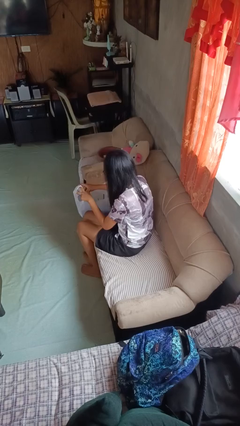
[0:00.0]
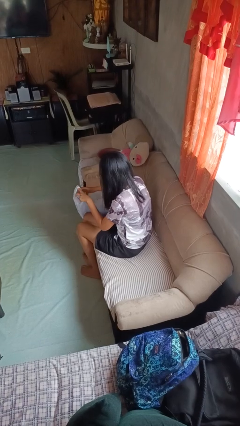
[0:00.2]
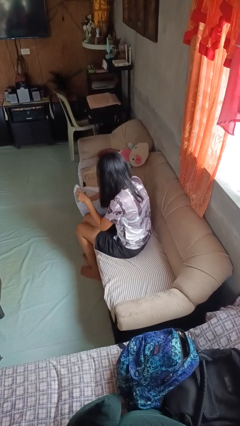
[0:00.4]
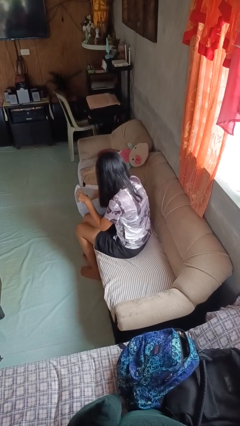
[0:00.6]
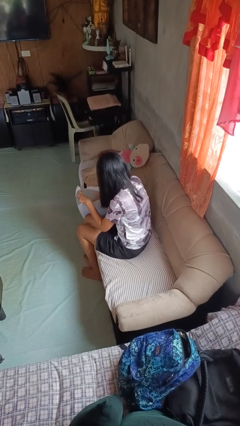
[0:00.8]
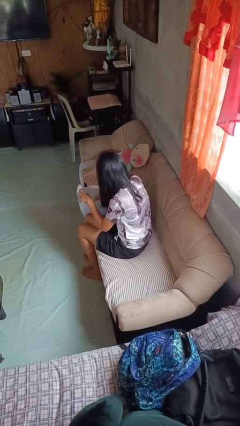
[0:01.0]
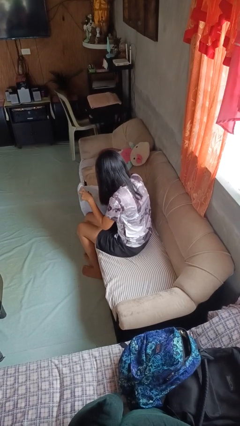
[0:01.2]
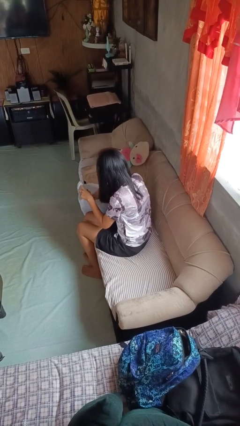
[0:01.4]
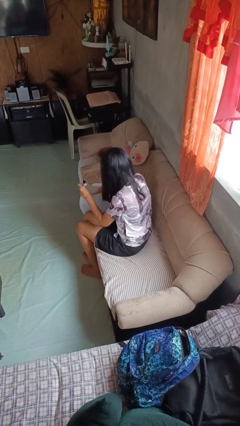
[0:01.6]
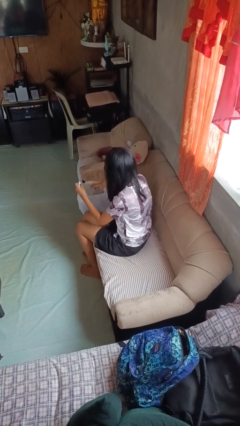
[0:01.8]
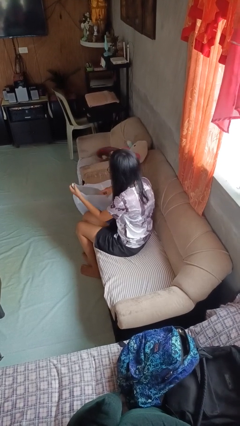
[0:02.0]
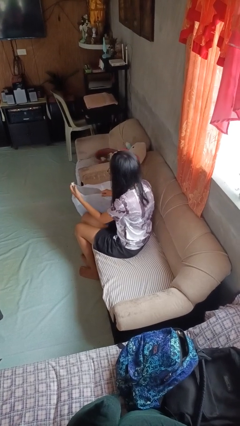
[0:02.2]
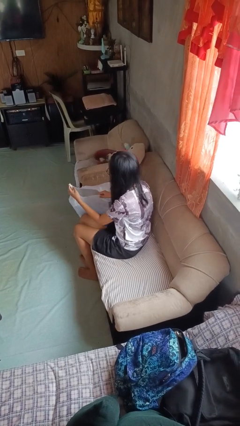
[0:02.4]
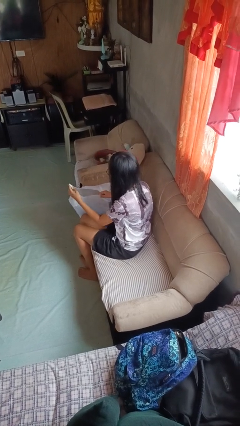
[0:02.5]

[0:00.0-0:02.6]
person searches in bag

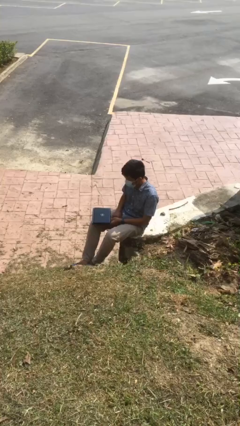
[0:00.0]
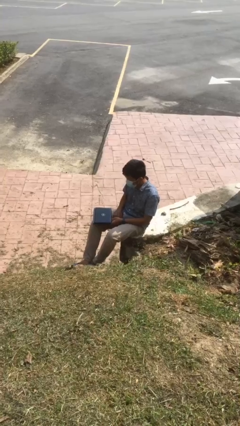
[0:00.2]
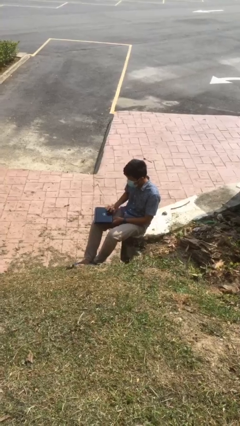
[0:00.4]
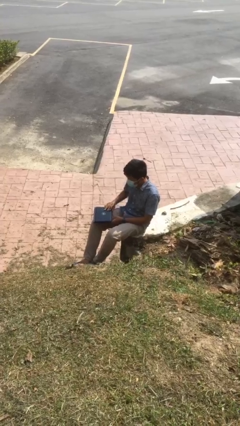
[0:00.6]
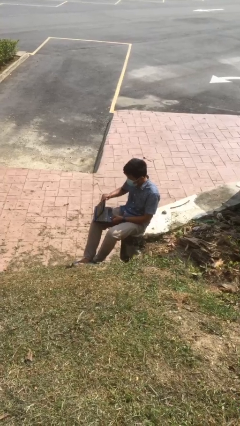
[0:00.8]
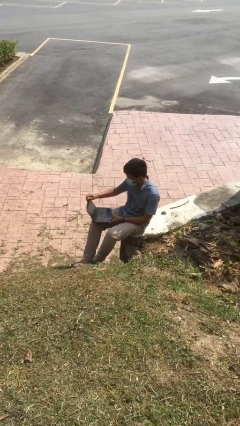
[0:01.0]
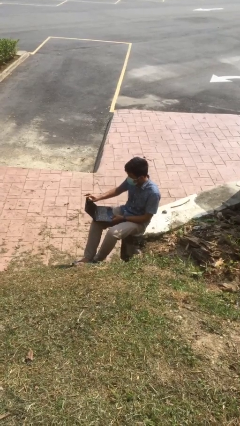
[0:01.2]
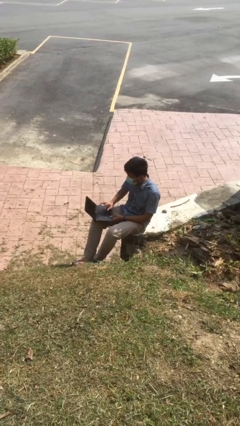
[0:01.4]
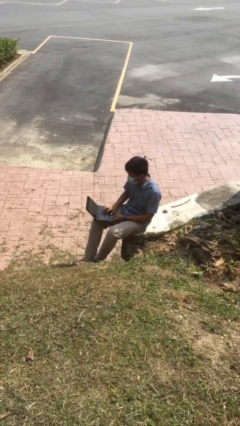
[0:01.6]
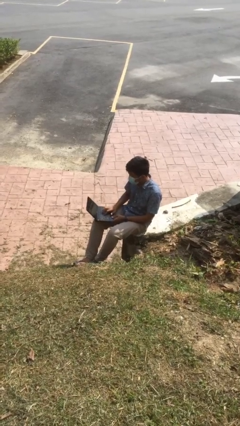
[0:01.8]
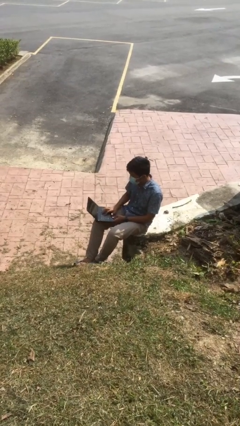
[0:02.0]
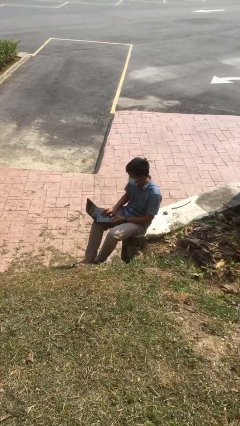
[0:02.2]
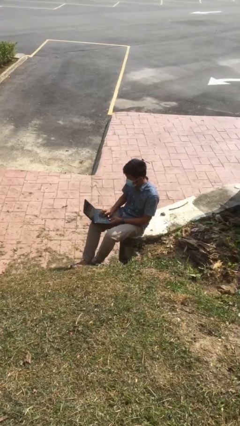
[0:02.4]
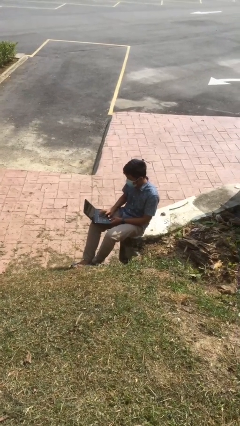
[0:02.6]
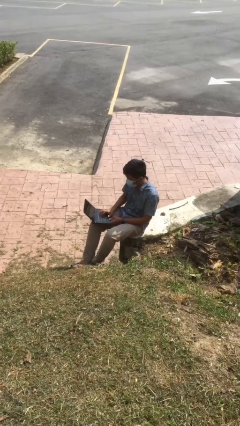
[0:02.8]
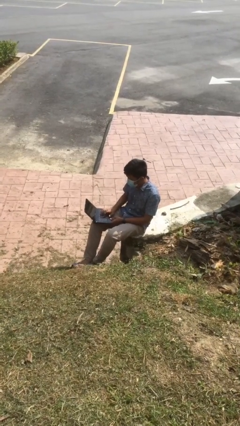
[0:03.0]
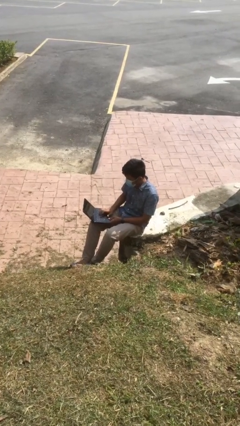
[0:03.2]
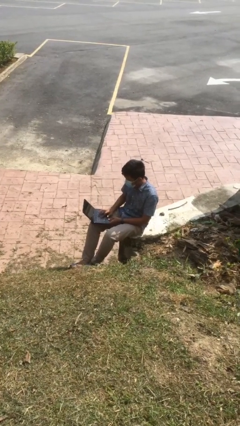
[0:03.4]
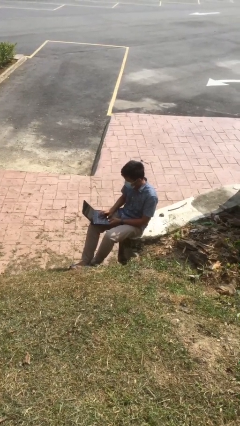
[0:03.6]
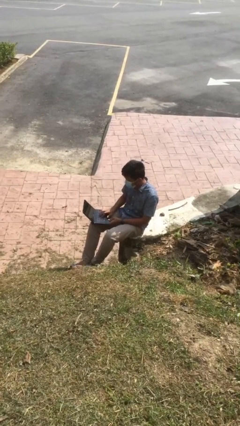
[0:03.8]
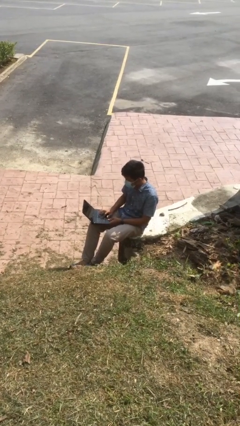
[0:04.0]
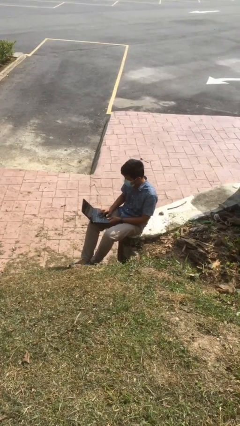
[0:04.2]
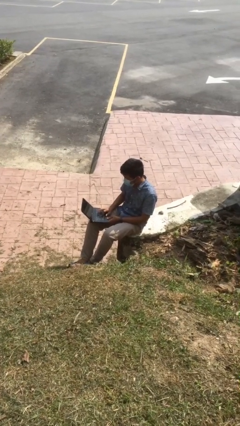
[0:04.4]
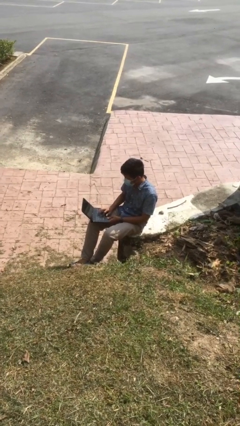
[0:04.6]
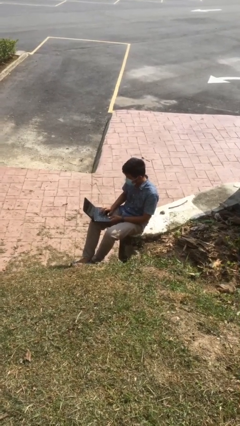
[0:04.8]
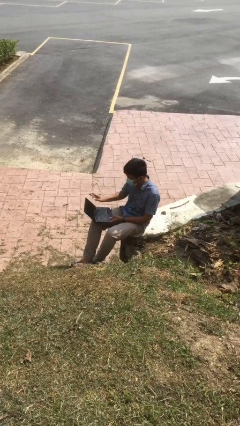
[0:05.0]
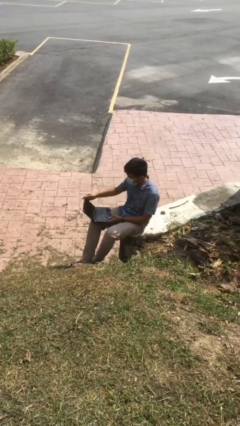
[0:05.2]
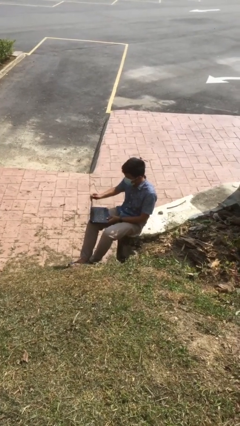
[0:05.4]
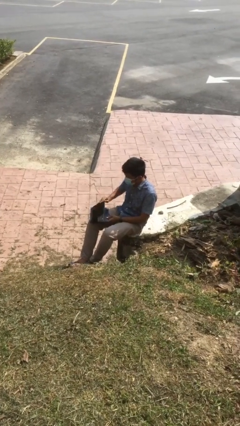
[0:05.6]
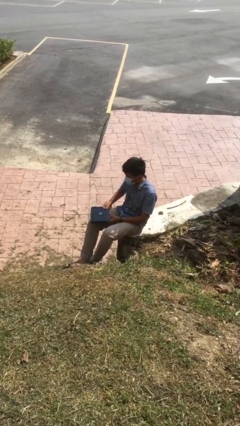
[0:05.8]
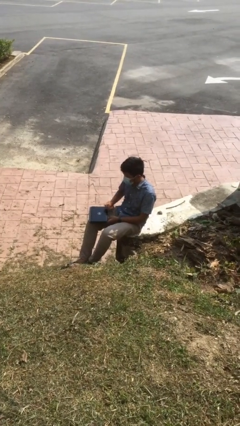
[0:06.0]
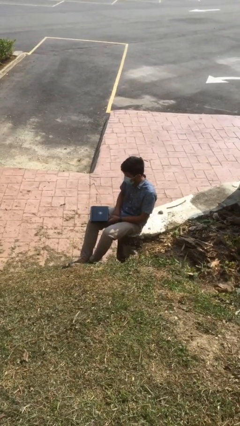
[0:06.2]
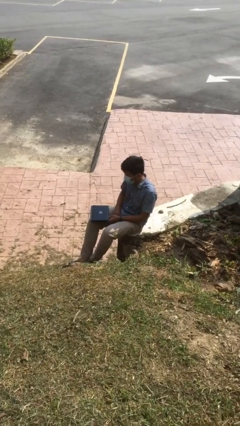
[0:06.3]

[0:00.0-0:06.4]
person interacts with laptop

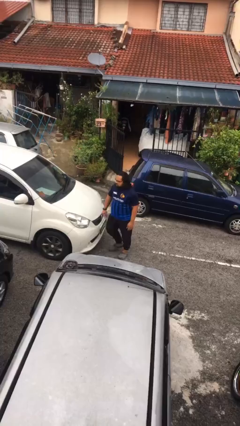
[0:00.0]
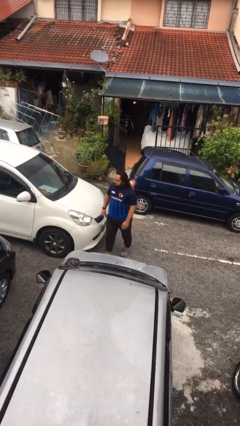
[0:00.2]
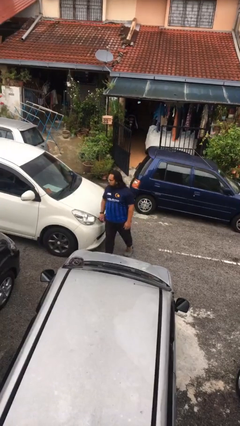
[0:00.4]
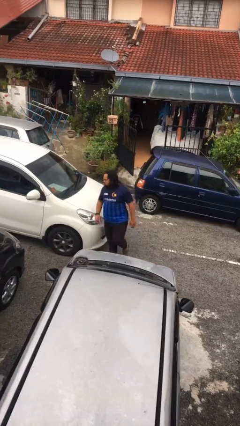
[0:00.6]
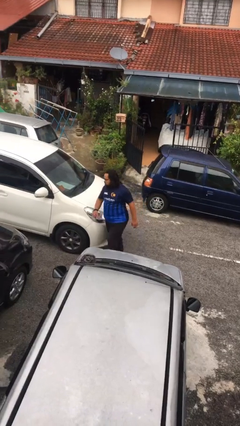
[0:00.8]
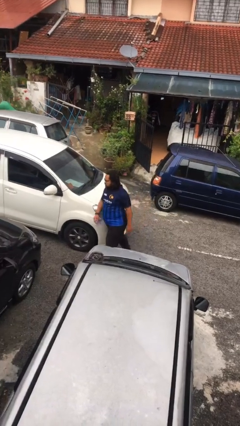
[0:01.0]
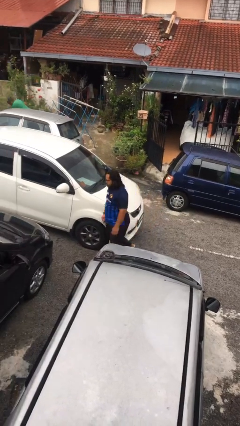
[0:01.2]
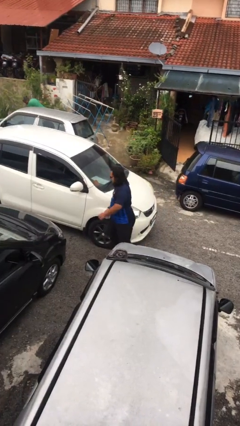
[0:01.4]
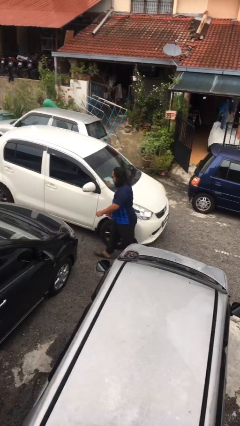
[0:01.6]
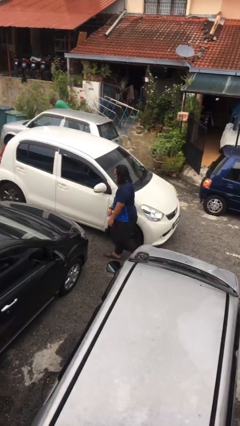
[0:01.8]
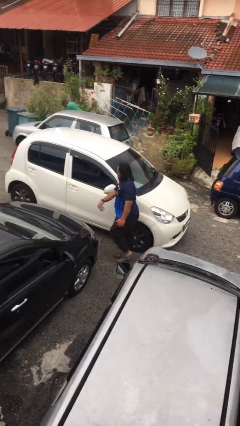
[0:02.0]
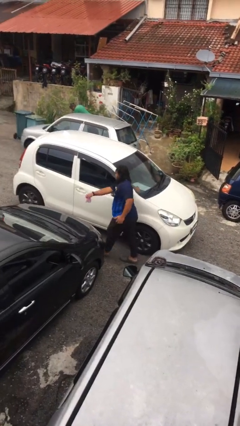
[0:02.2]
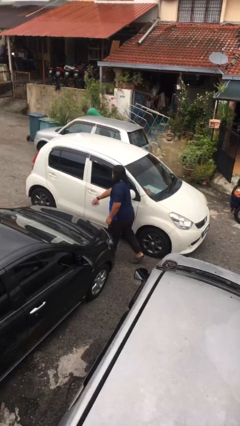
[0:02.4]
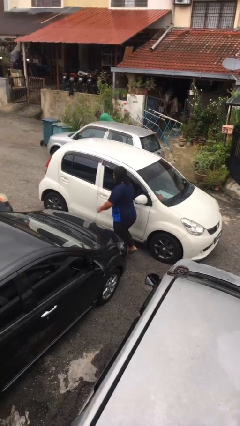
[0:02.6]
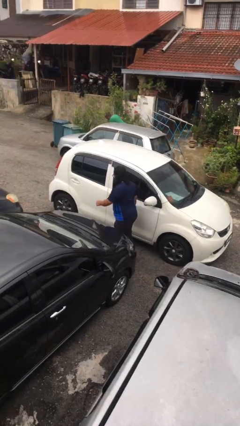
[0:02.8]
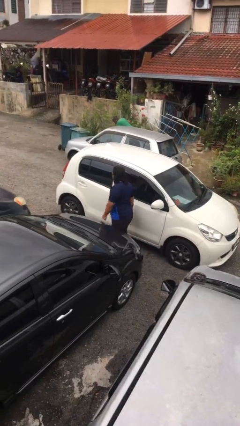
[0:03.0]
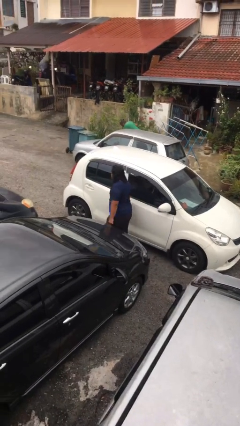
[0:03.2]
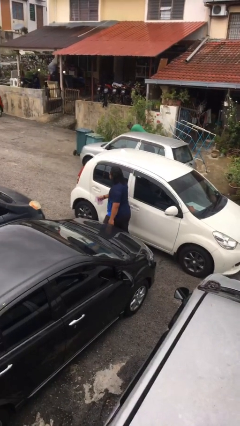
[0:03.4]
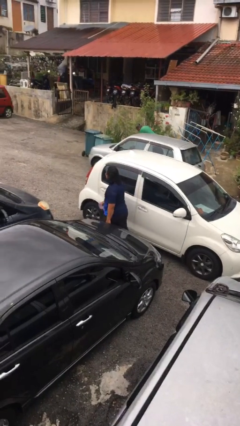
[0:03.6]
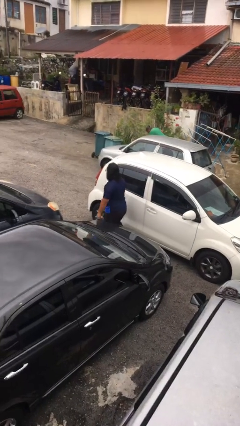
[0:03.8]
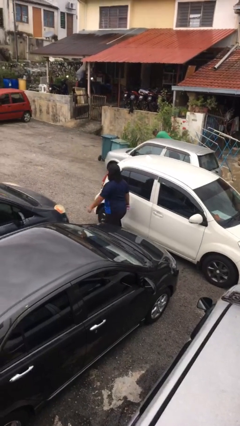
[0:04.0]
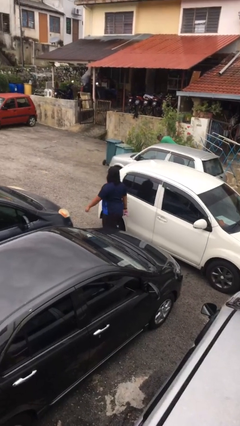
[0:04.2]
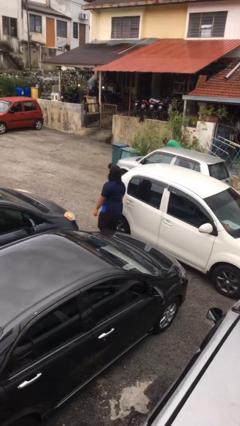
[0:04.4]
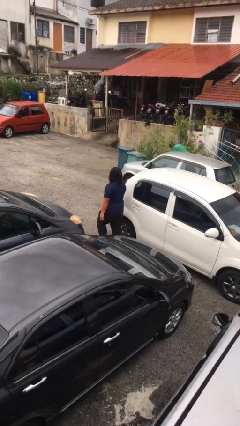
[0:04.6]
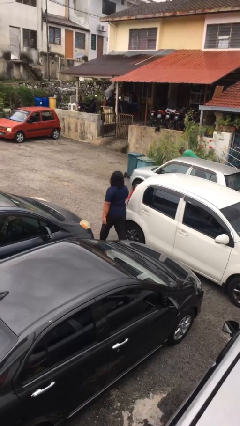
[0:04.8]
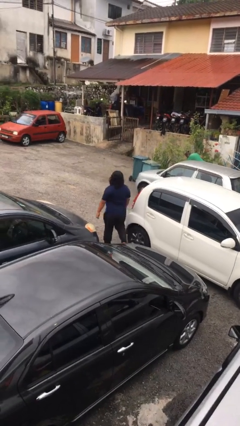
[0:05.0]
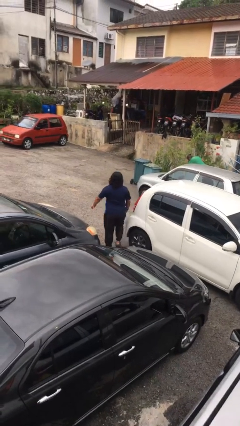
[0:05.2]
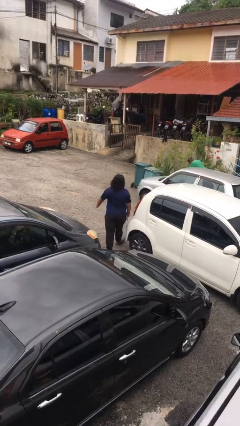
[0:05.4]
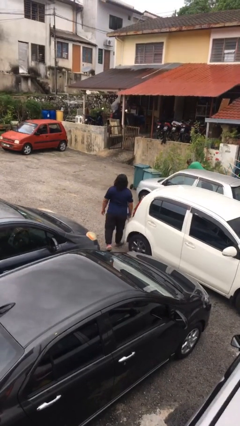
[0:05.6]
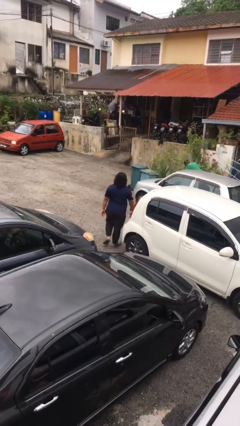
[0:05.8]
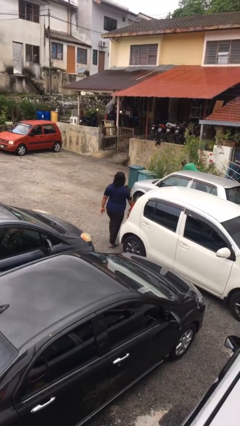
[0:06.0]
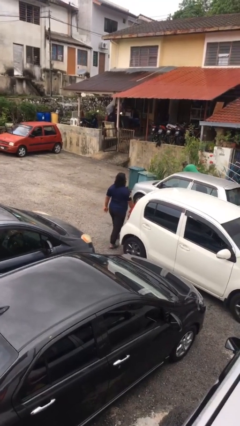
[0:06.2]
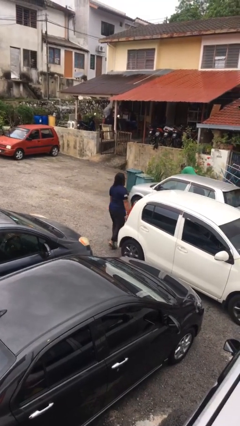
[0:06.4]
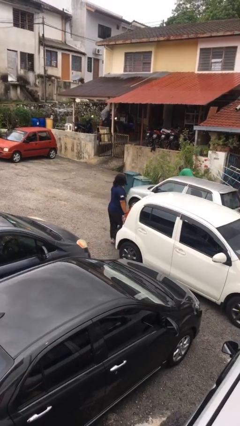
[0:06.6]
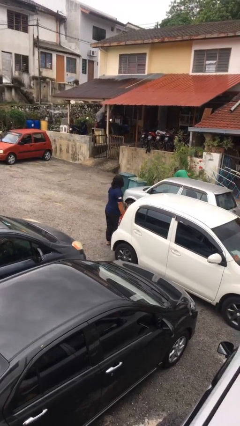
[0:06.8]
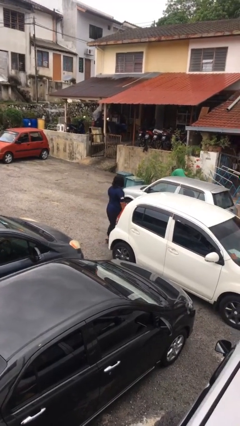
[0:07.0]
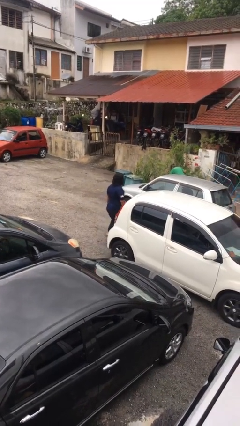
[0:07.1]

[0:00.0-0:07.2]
person walks around car

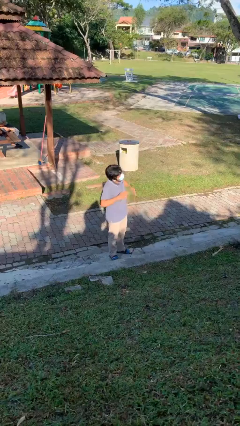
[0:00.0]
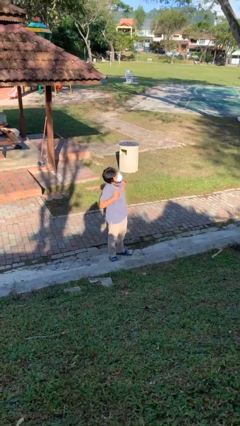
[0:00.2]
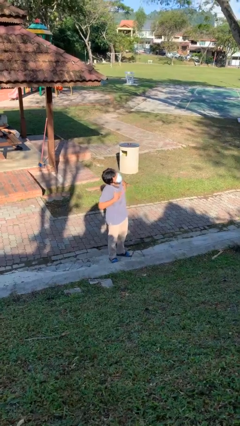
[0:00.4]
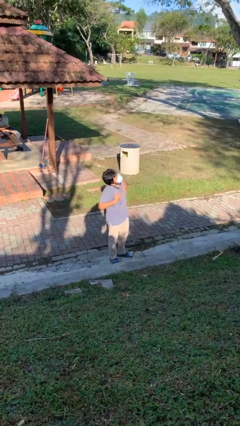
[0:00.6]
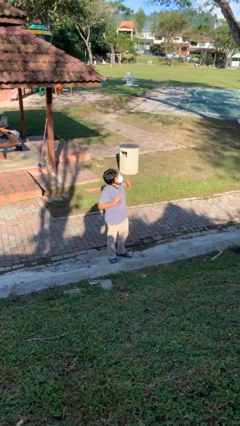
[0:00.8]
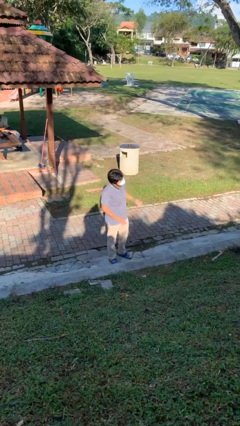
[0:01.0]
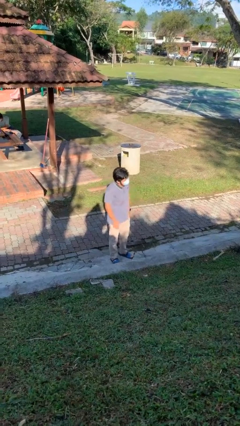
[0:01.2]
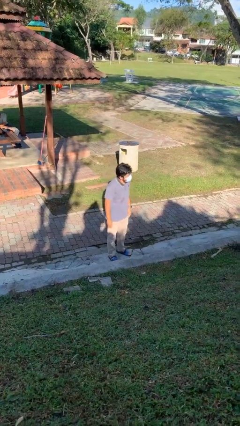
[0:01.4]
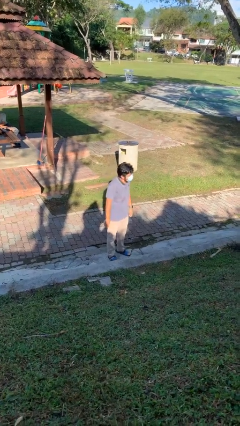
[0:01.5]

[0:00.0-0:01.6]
person drums on chest

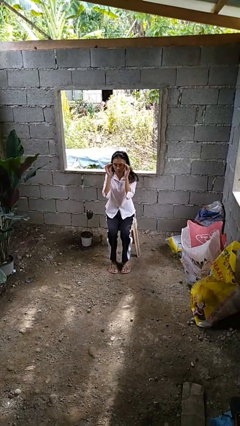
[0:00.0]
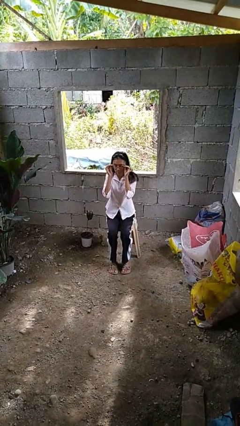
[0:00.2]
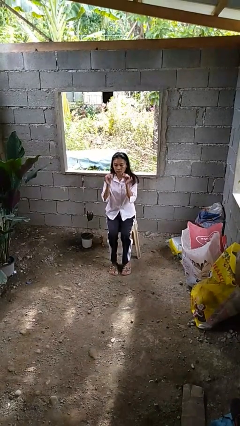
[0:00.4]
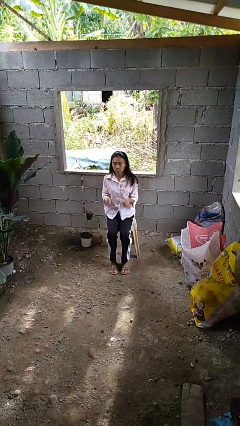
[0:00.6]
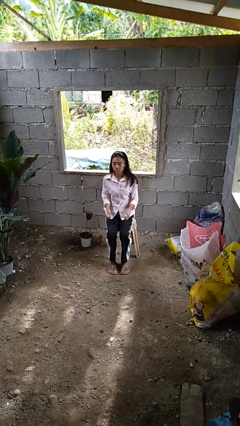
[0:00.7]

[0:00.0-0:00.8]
person takes off glasses
